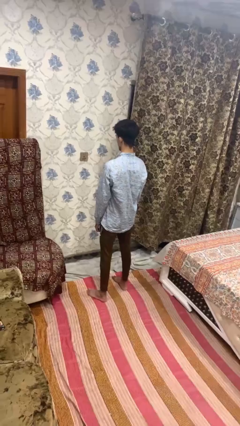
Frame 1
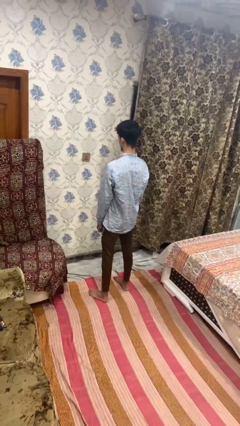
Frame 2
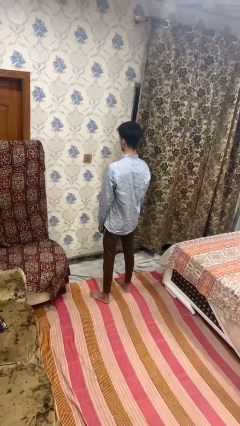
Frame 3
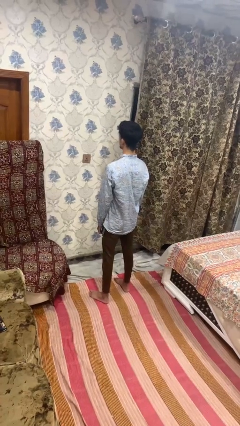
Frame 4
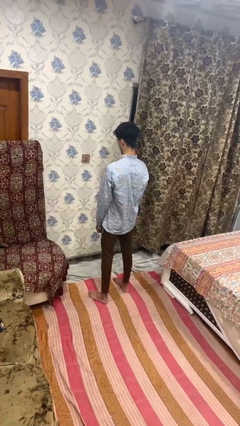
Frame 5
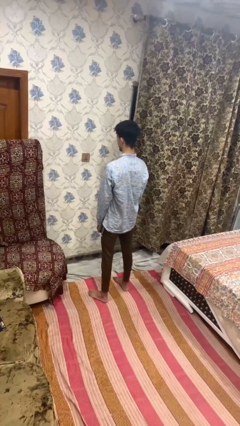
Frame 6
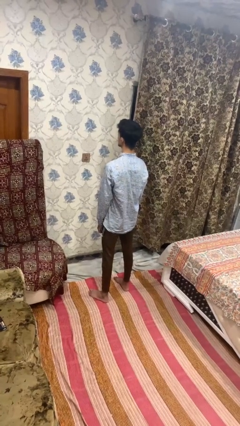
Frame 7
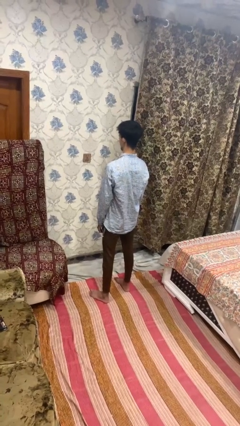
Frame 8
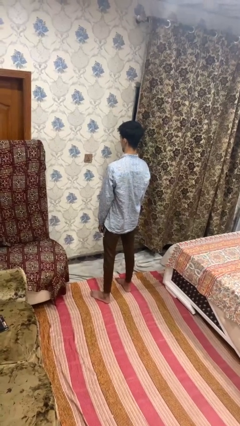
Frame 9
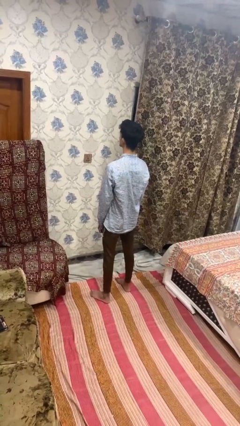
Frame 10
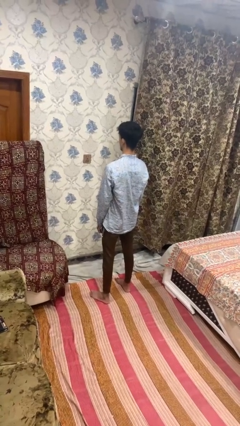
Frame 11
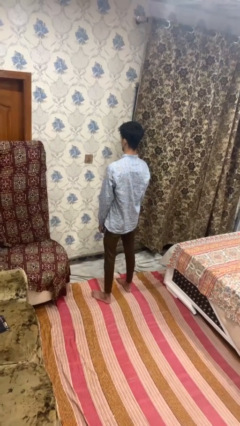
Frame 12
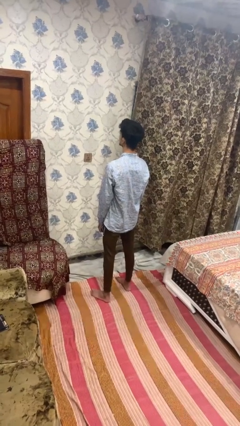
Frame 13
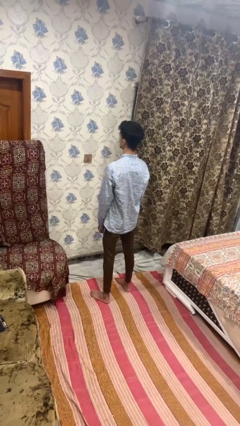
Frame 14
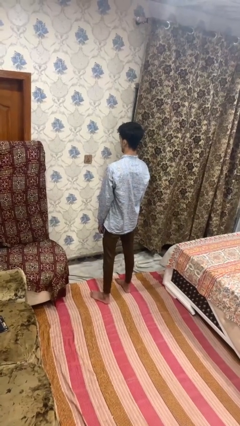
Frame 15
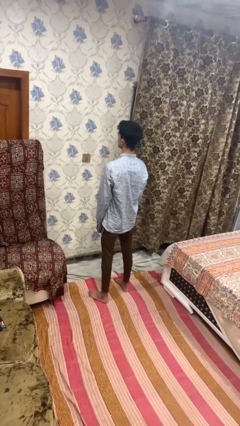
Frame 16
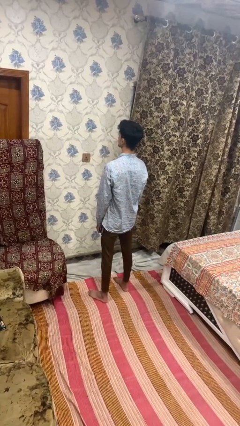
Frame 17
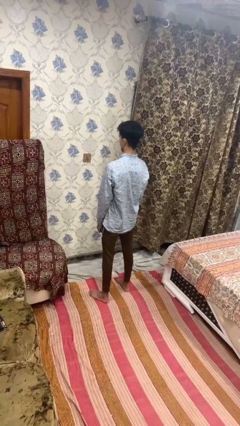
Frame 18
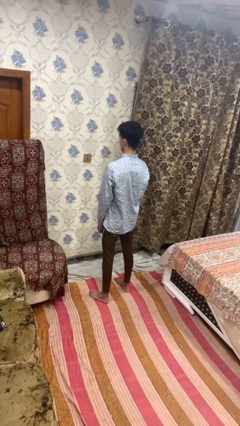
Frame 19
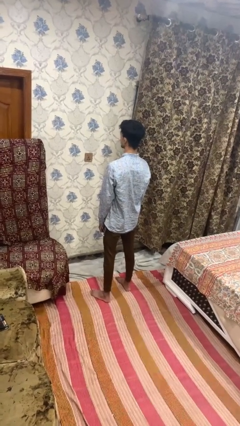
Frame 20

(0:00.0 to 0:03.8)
person nods head

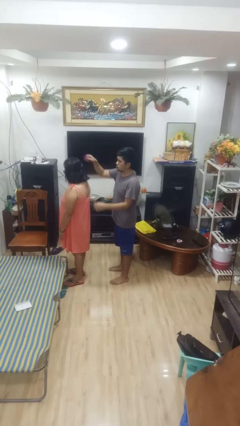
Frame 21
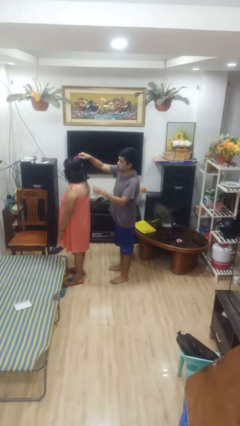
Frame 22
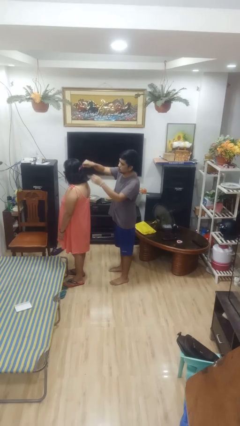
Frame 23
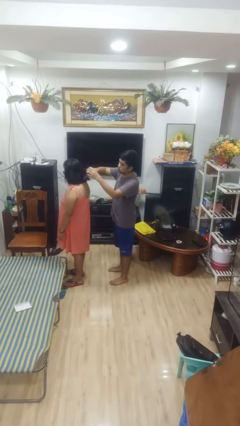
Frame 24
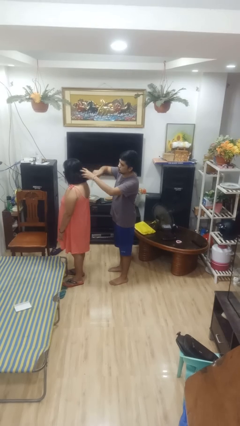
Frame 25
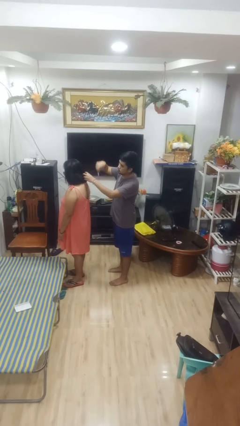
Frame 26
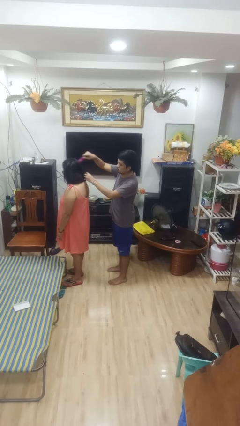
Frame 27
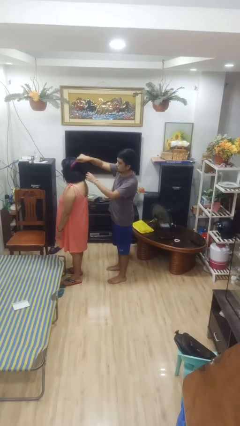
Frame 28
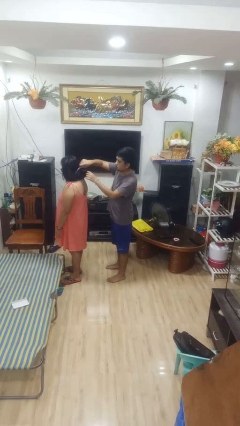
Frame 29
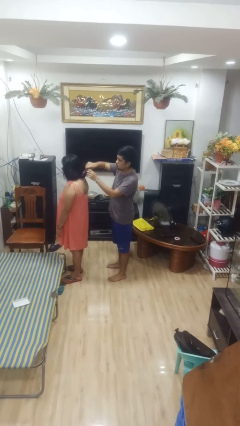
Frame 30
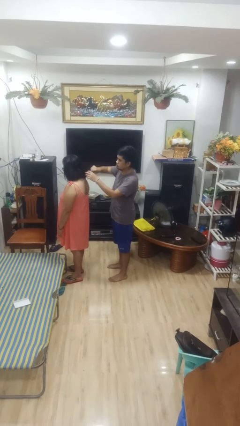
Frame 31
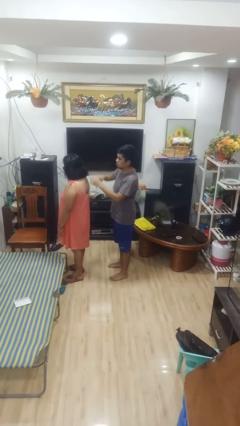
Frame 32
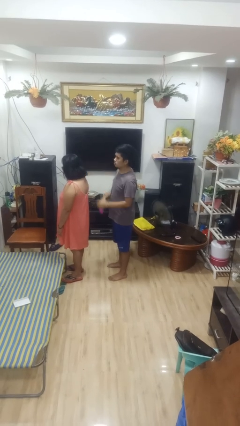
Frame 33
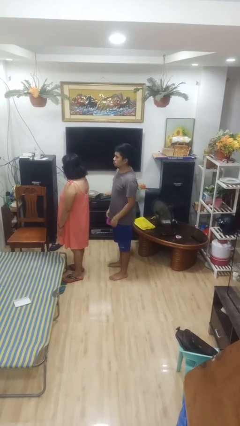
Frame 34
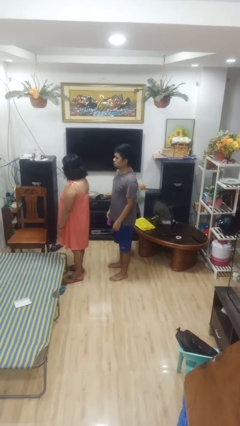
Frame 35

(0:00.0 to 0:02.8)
person brushes hair of person

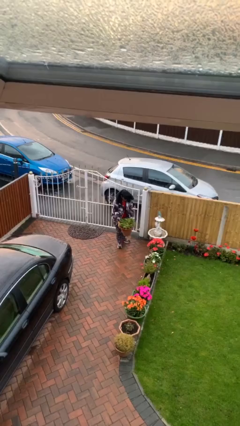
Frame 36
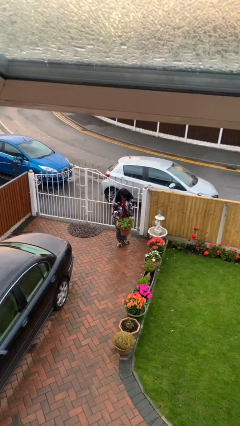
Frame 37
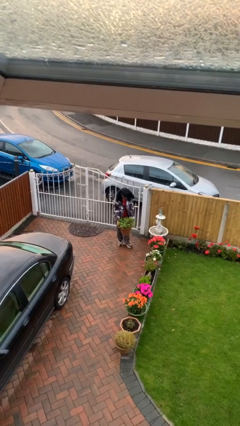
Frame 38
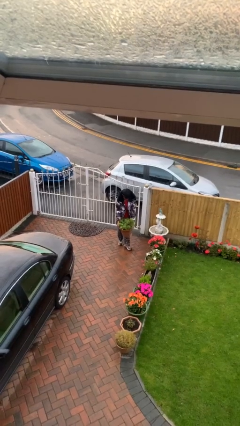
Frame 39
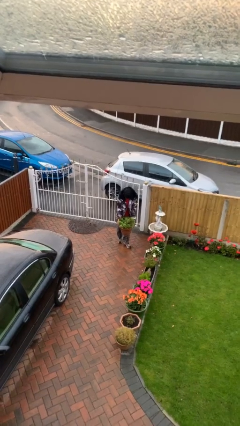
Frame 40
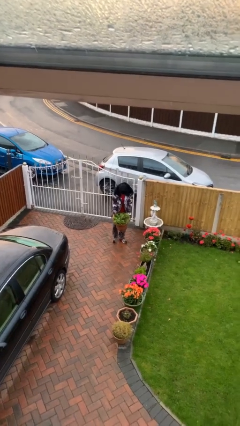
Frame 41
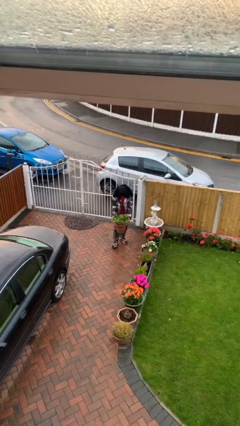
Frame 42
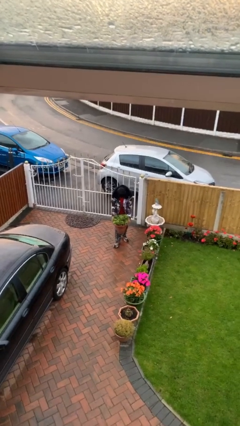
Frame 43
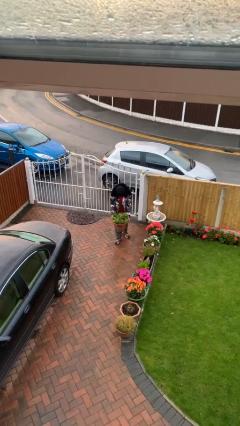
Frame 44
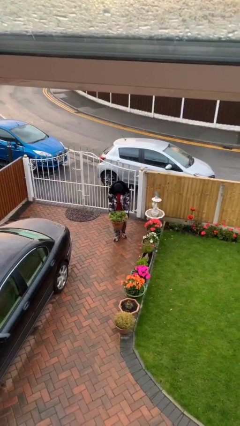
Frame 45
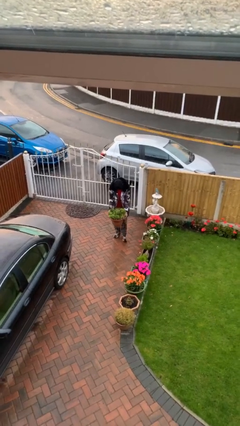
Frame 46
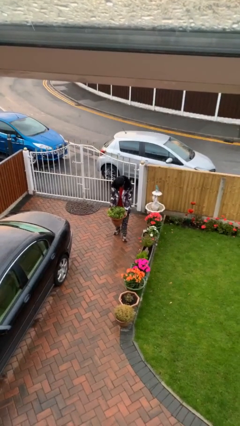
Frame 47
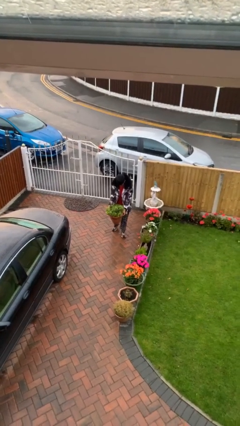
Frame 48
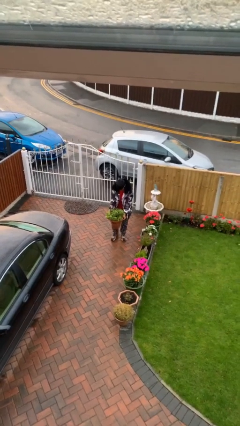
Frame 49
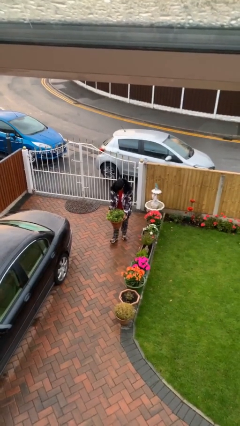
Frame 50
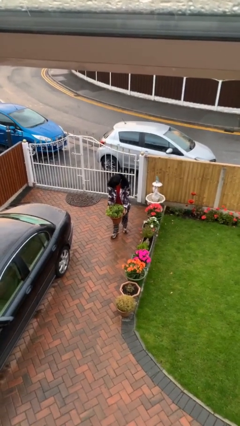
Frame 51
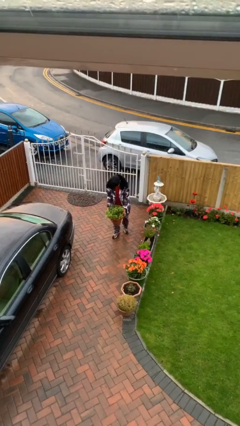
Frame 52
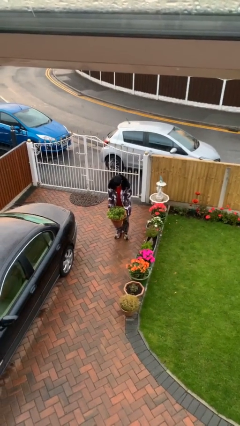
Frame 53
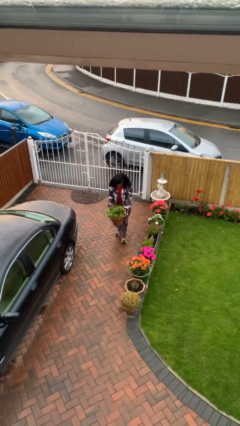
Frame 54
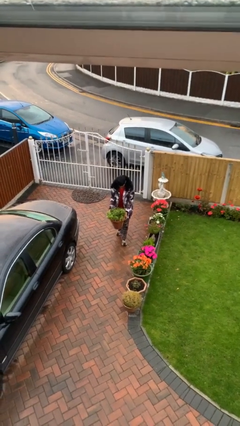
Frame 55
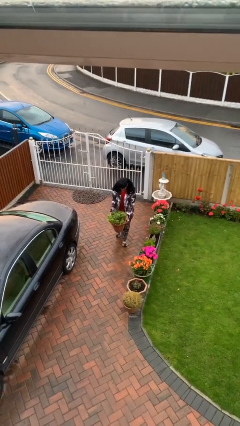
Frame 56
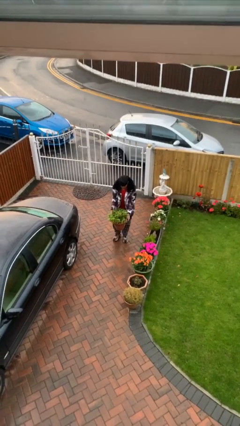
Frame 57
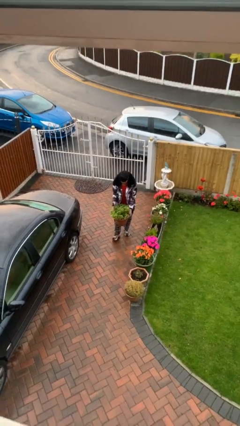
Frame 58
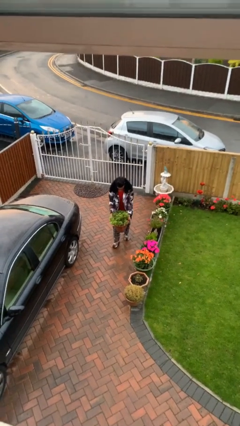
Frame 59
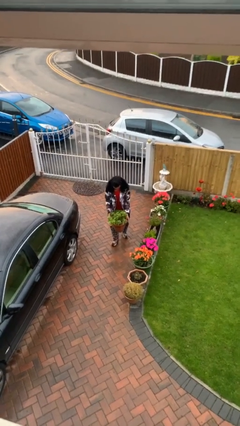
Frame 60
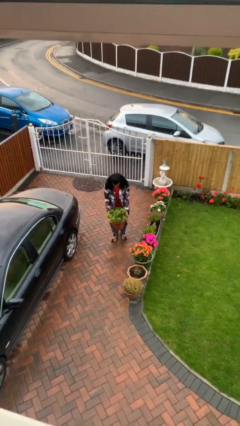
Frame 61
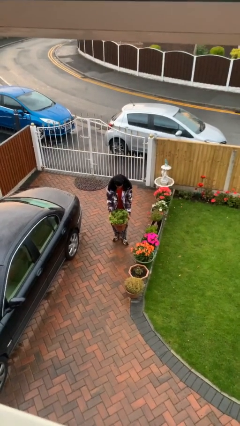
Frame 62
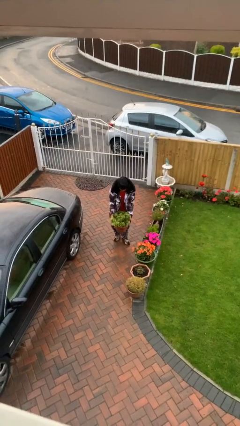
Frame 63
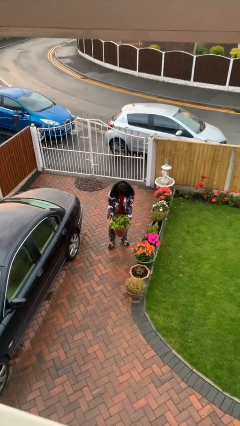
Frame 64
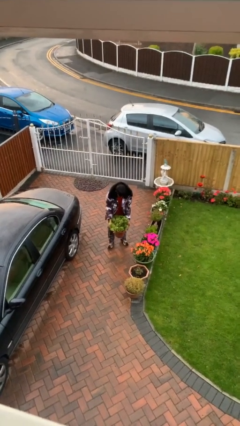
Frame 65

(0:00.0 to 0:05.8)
person carries heavy object

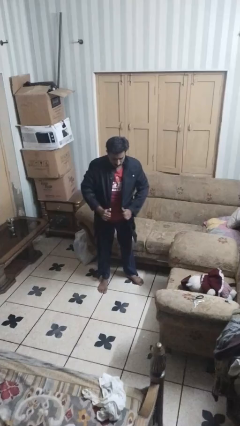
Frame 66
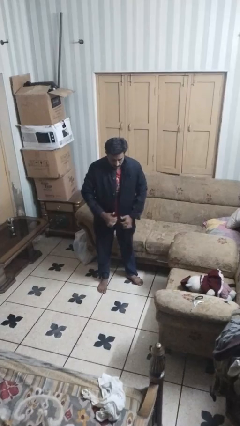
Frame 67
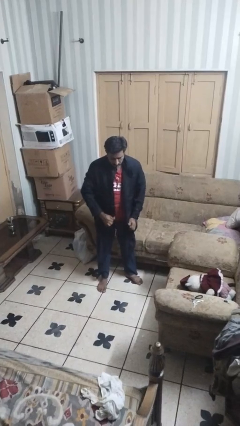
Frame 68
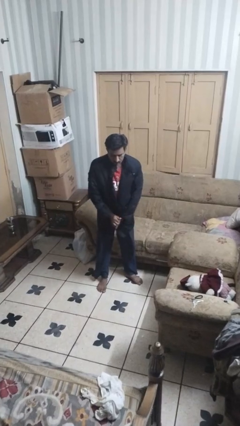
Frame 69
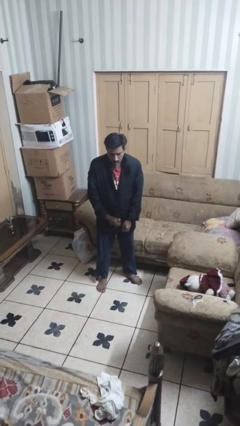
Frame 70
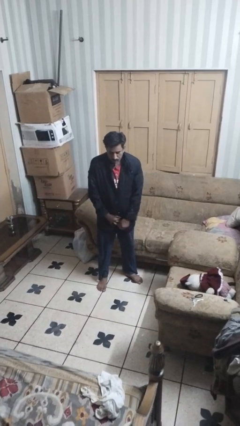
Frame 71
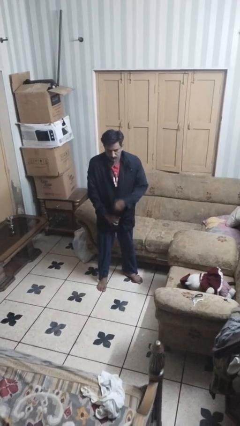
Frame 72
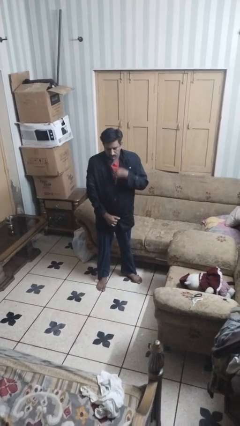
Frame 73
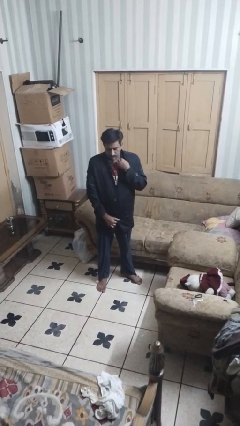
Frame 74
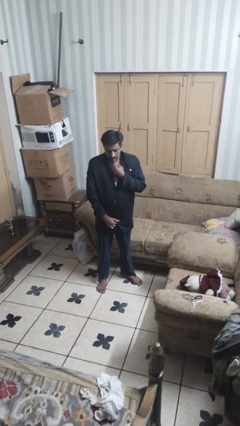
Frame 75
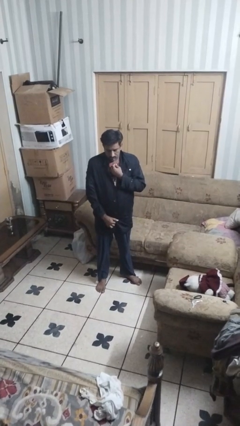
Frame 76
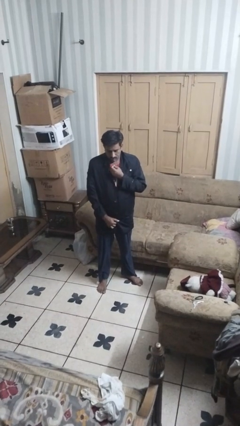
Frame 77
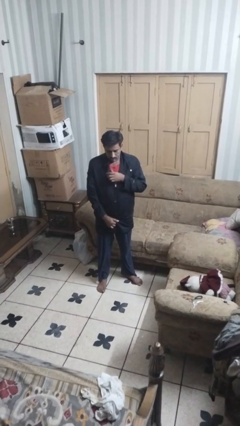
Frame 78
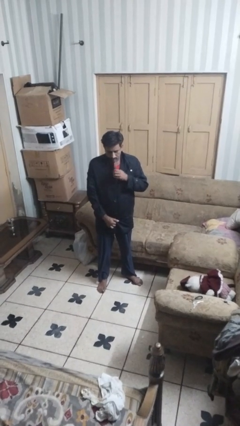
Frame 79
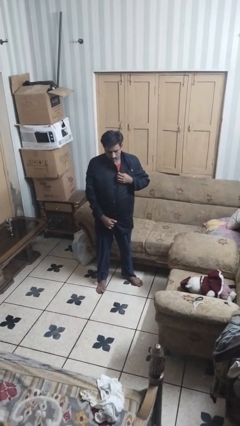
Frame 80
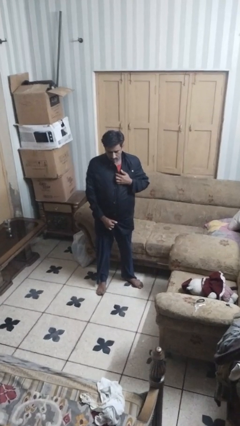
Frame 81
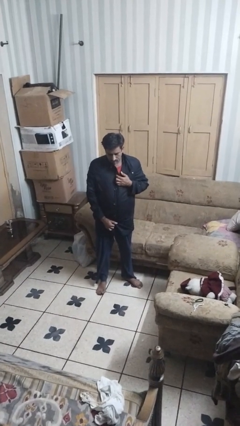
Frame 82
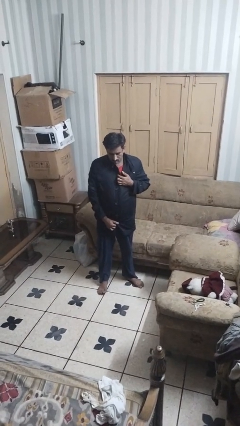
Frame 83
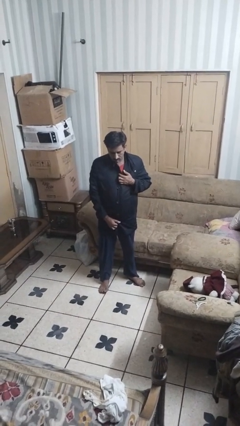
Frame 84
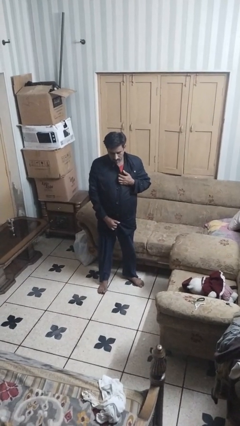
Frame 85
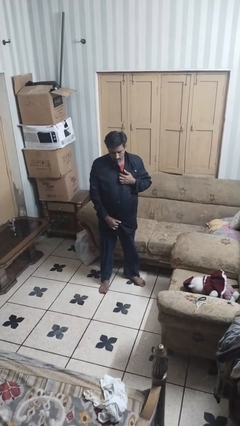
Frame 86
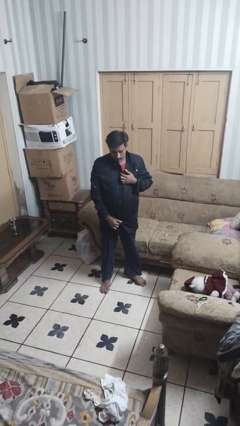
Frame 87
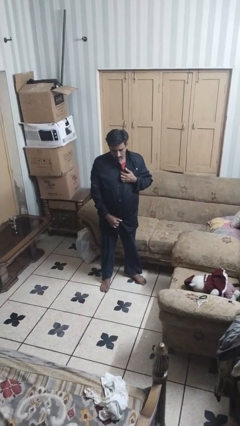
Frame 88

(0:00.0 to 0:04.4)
person zips up jacket

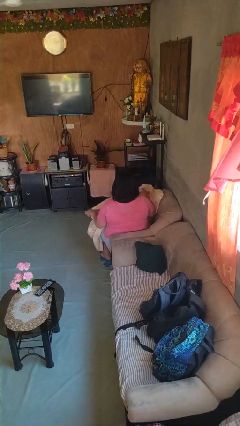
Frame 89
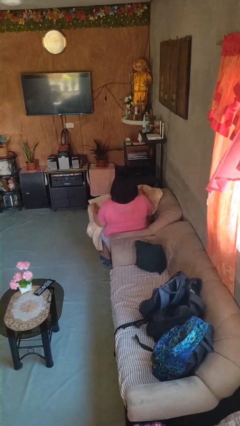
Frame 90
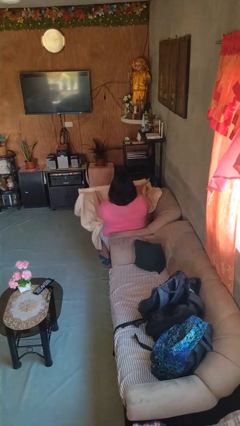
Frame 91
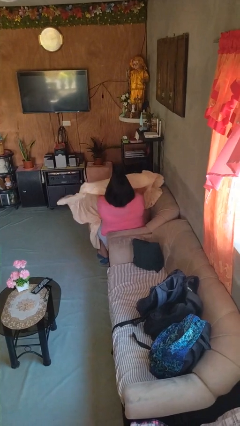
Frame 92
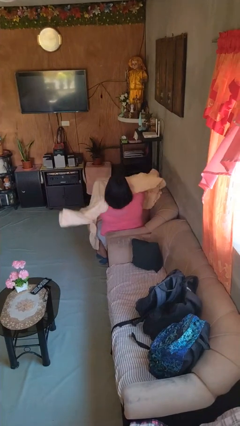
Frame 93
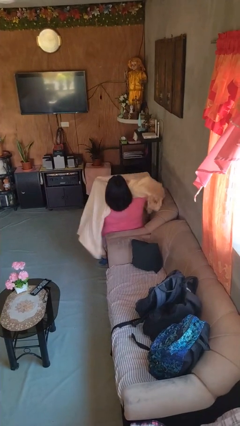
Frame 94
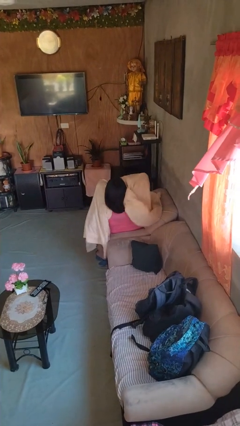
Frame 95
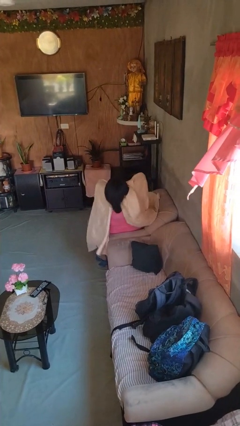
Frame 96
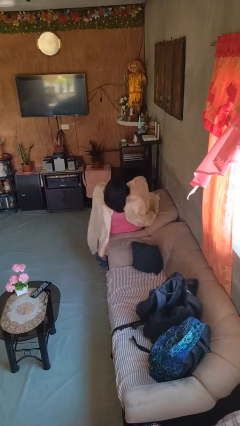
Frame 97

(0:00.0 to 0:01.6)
person covers with blanket
